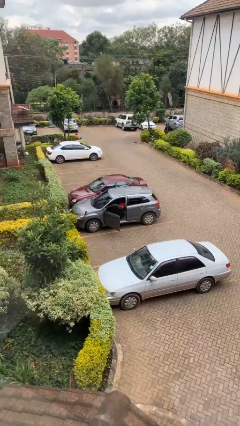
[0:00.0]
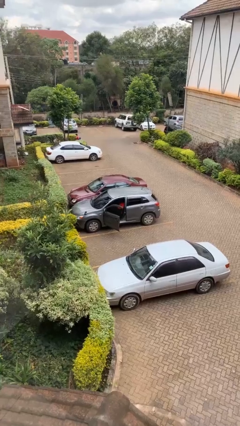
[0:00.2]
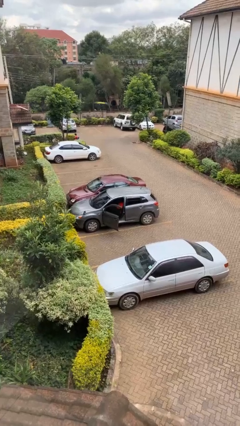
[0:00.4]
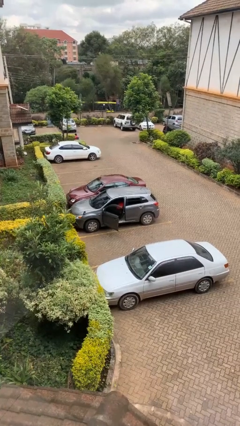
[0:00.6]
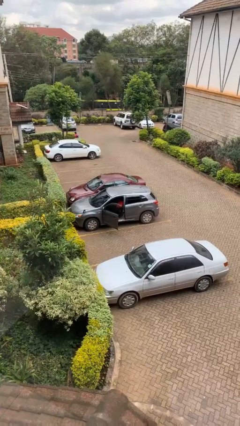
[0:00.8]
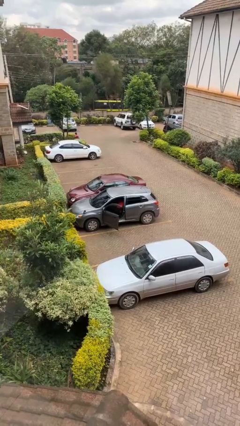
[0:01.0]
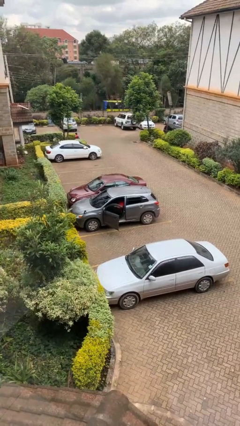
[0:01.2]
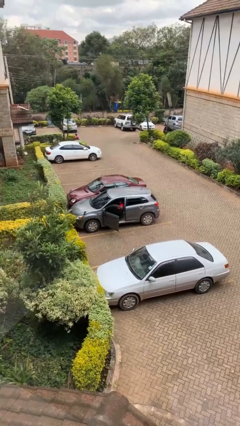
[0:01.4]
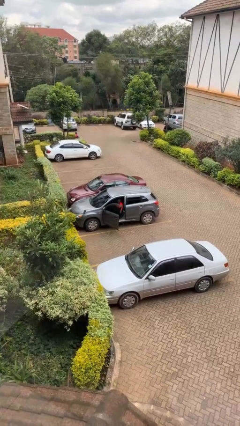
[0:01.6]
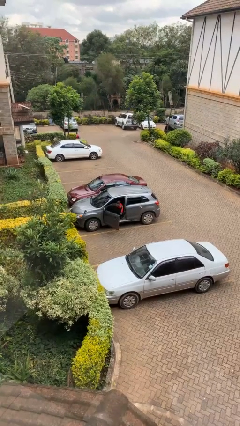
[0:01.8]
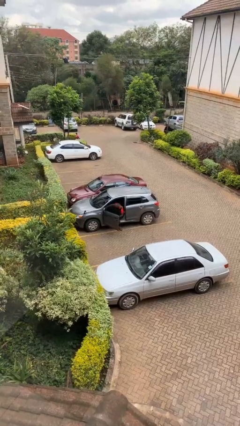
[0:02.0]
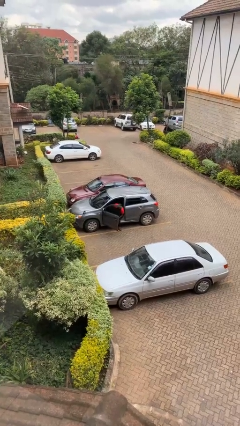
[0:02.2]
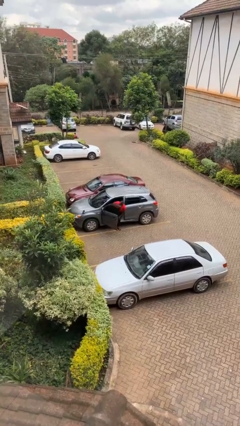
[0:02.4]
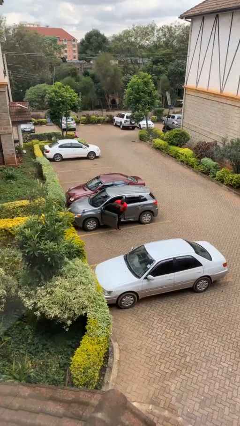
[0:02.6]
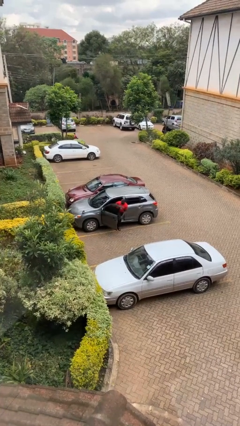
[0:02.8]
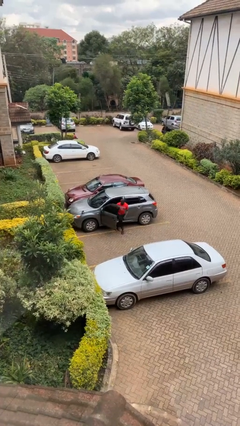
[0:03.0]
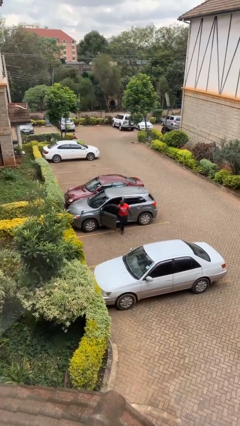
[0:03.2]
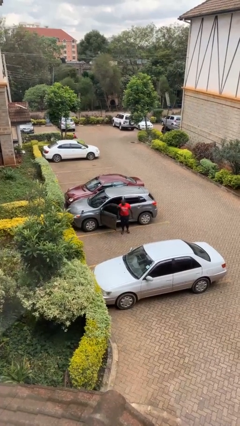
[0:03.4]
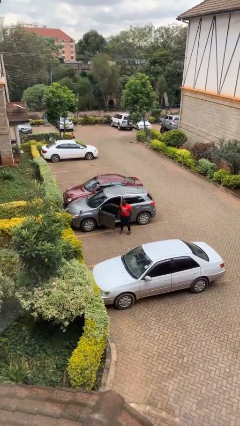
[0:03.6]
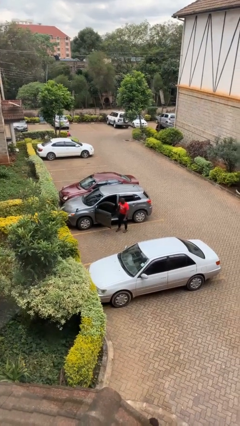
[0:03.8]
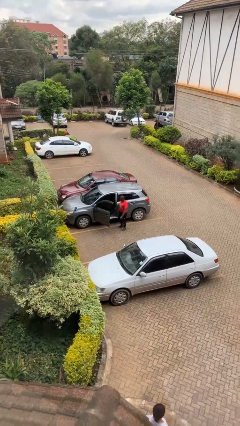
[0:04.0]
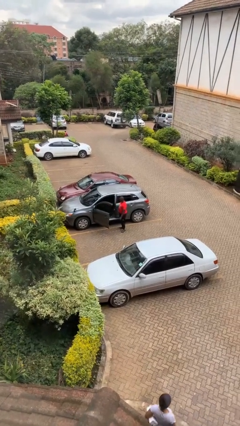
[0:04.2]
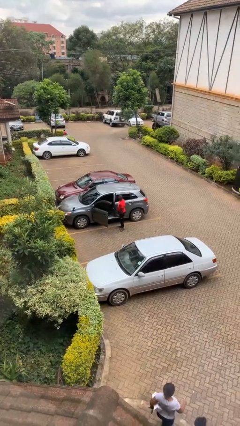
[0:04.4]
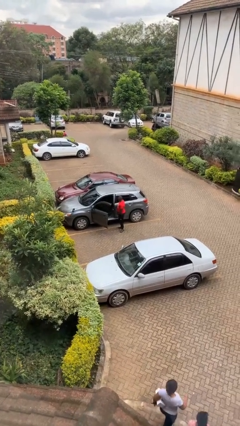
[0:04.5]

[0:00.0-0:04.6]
person exits car

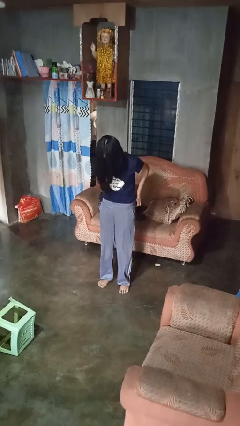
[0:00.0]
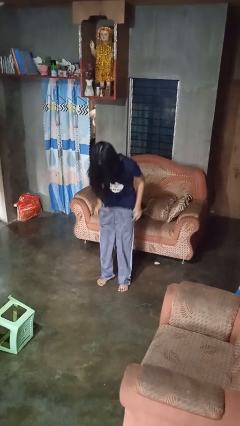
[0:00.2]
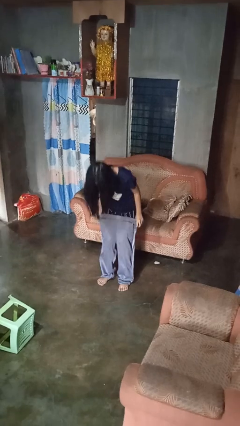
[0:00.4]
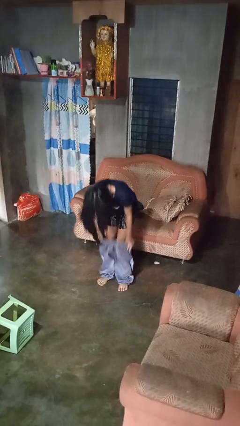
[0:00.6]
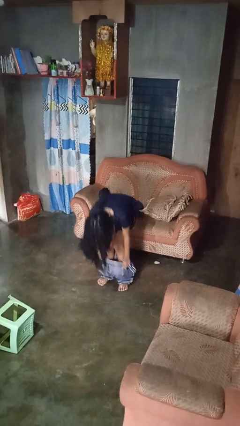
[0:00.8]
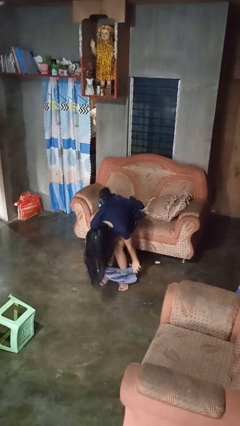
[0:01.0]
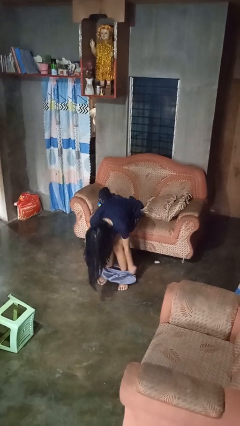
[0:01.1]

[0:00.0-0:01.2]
person takes off pants

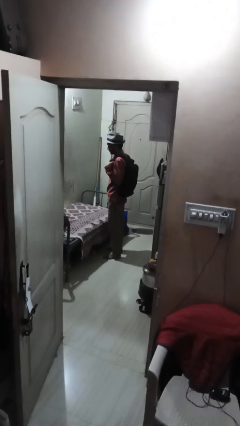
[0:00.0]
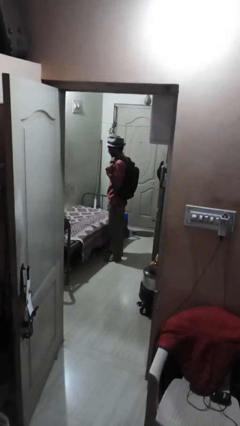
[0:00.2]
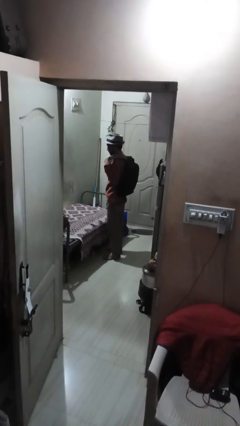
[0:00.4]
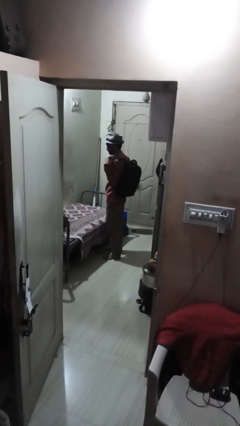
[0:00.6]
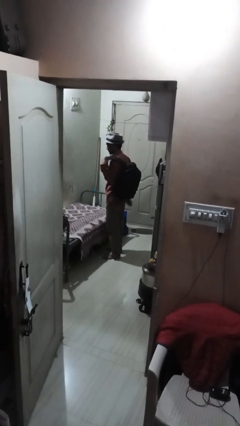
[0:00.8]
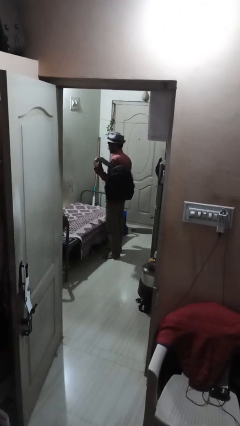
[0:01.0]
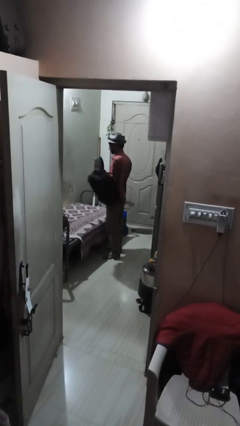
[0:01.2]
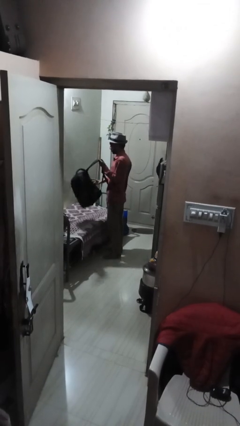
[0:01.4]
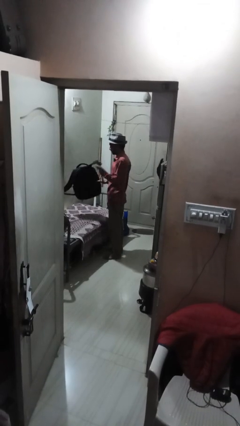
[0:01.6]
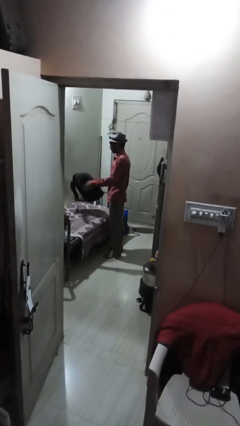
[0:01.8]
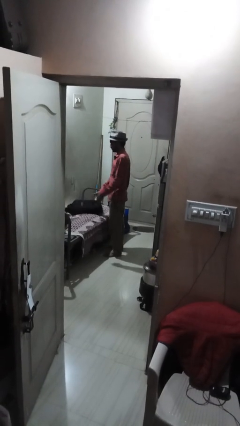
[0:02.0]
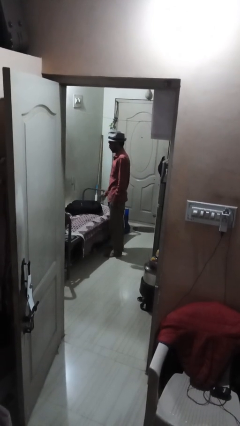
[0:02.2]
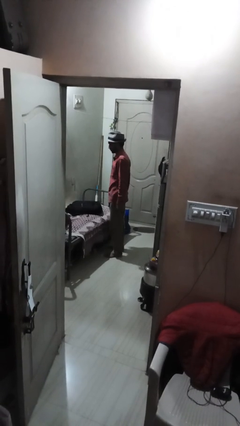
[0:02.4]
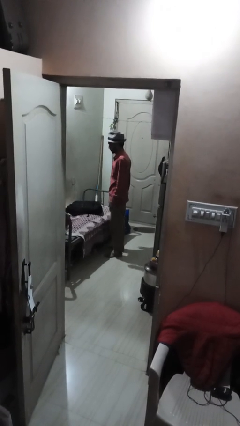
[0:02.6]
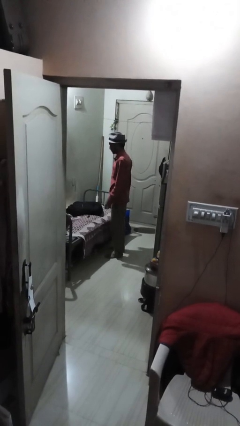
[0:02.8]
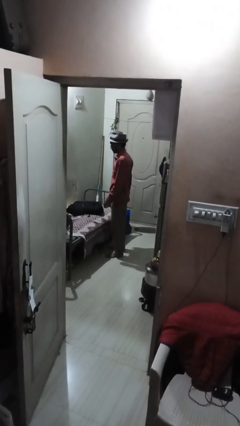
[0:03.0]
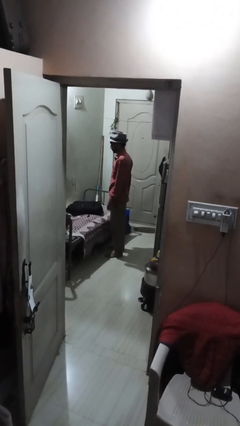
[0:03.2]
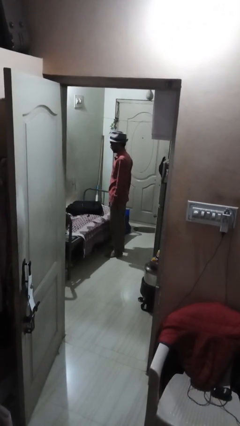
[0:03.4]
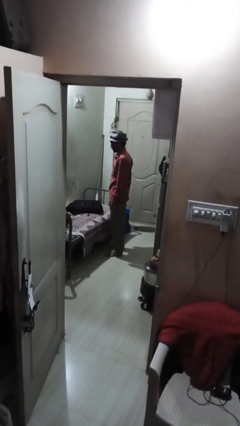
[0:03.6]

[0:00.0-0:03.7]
person takes off backpack

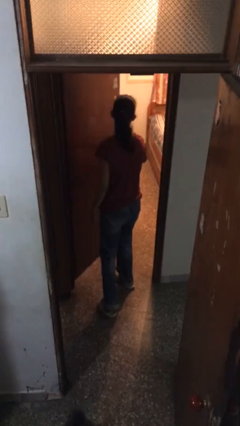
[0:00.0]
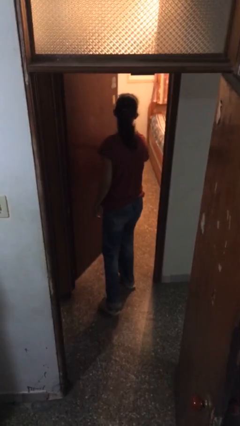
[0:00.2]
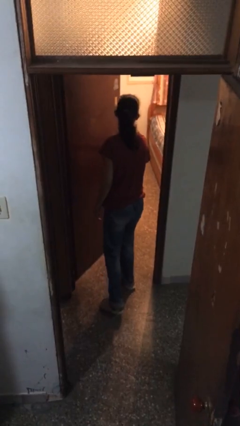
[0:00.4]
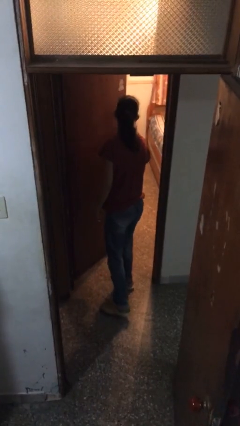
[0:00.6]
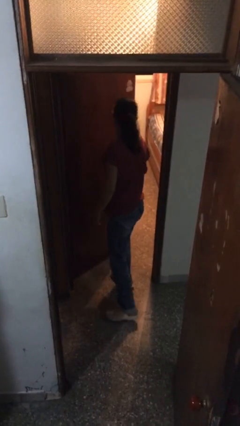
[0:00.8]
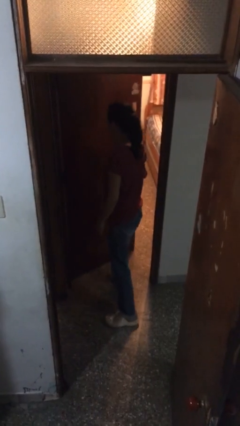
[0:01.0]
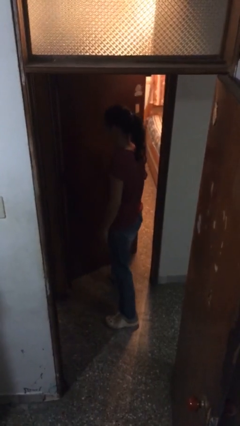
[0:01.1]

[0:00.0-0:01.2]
person opens facility door

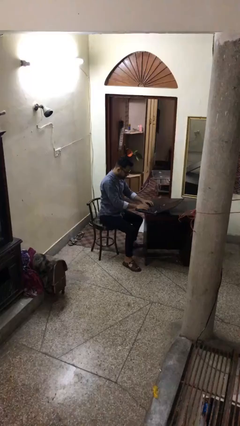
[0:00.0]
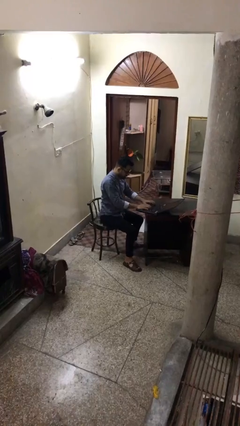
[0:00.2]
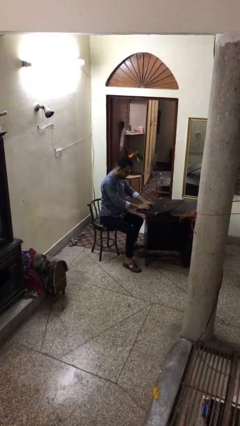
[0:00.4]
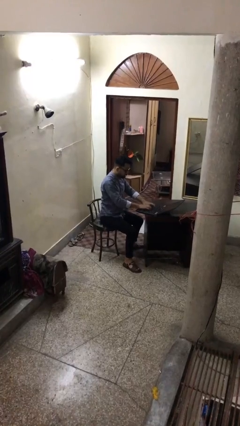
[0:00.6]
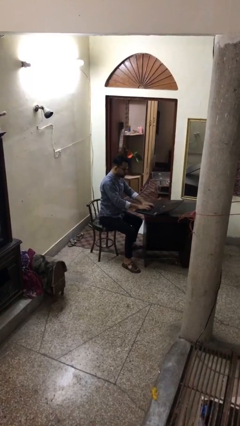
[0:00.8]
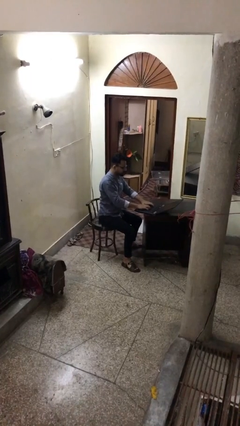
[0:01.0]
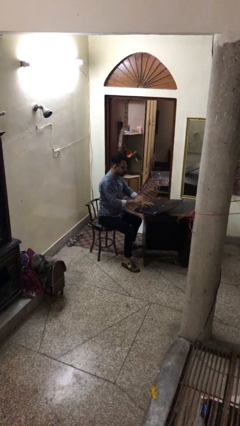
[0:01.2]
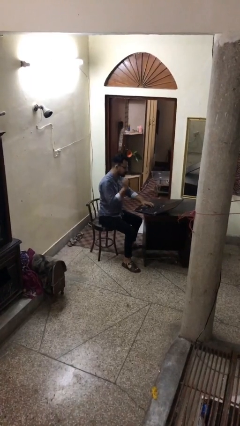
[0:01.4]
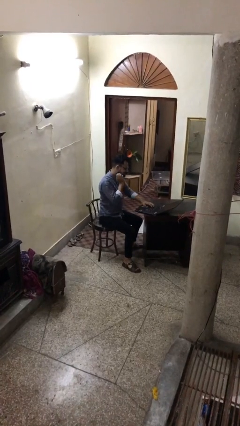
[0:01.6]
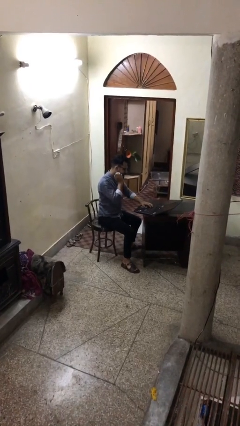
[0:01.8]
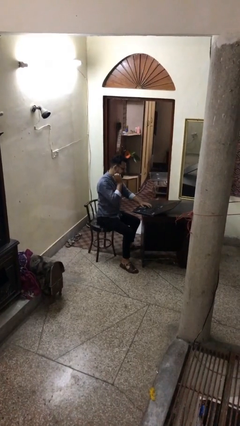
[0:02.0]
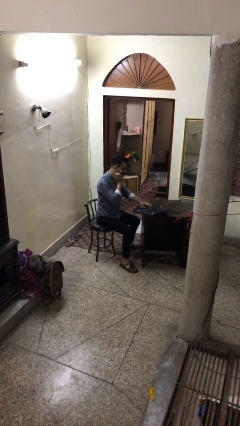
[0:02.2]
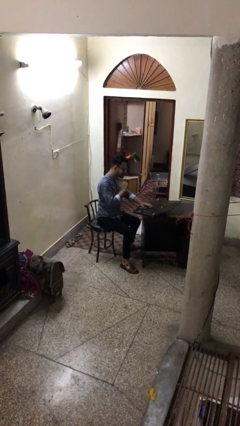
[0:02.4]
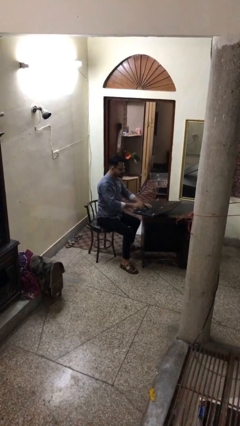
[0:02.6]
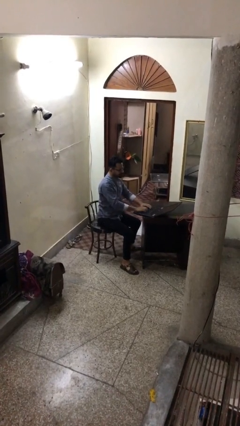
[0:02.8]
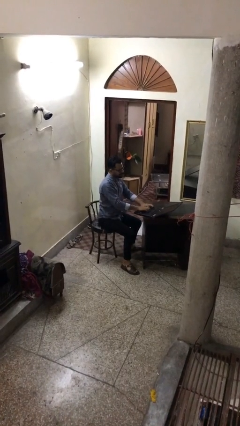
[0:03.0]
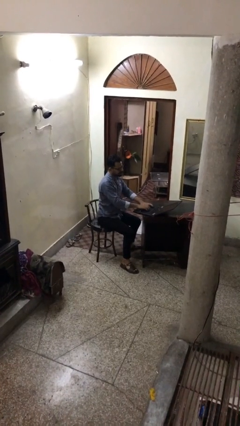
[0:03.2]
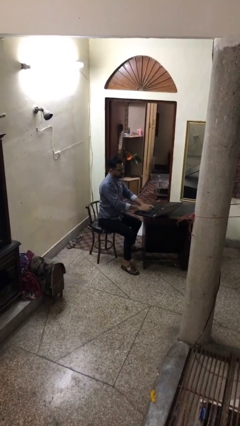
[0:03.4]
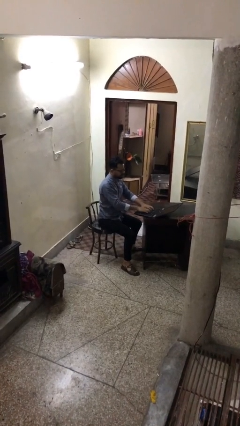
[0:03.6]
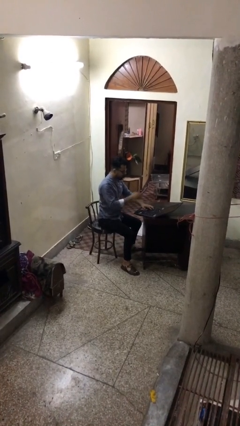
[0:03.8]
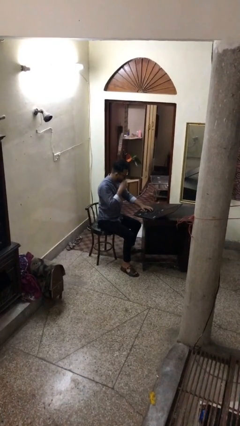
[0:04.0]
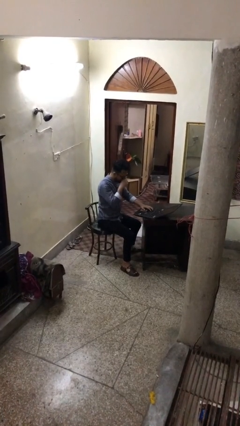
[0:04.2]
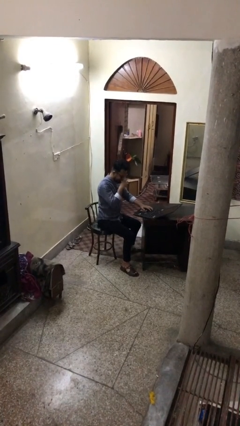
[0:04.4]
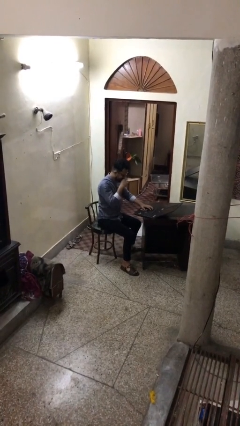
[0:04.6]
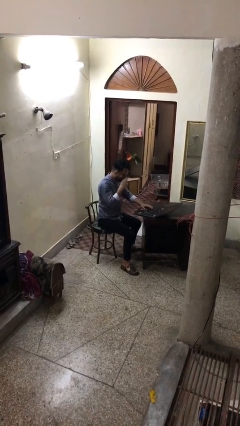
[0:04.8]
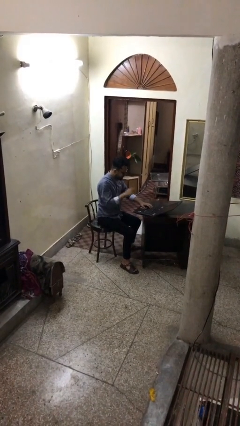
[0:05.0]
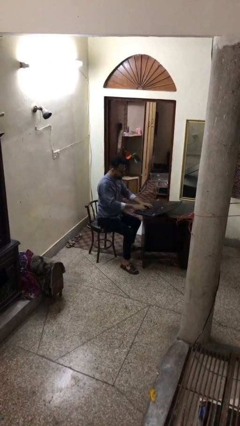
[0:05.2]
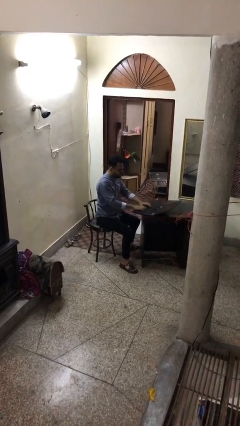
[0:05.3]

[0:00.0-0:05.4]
person interacts with laptop

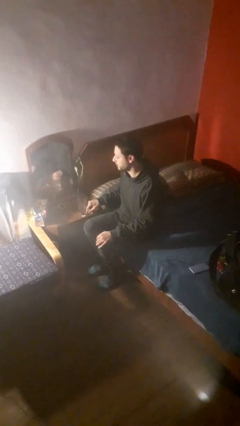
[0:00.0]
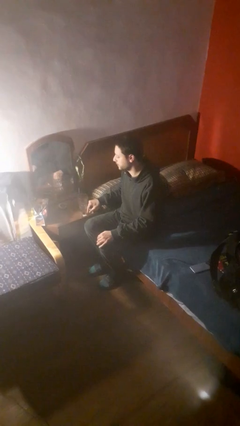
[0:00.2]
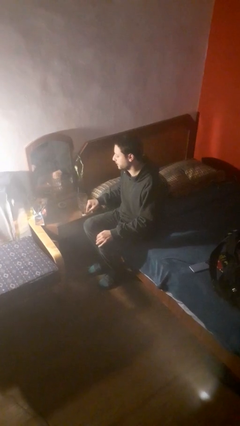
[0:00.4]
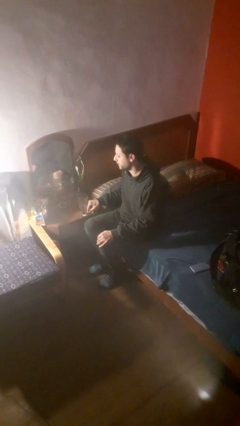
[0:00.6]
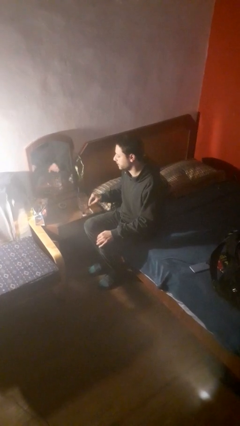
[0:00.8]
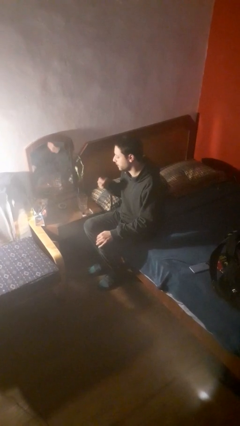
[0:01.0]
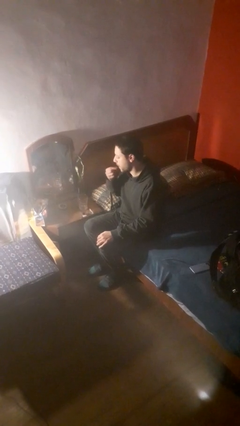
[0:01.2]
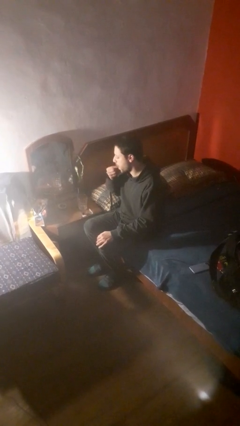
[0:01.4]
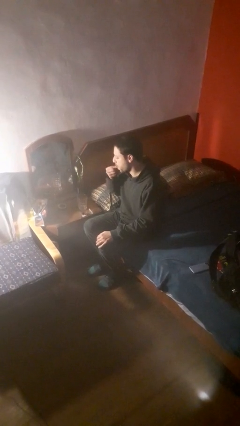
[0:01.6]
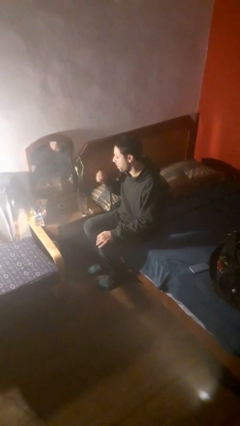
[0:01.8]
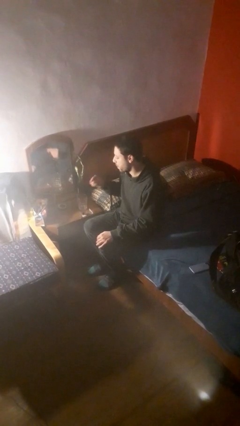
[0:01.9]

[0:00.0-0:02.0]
person takes medicine pills
